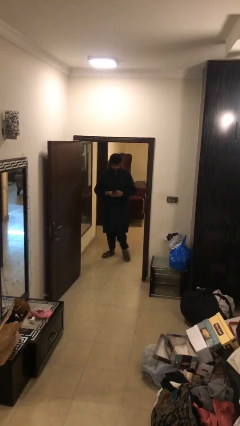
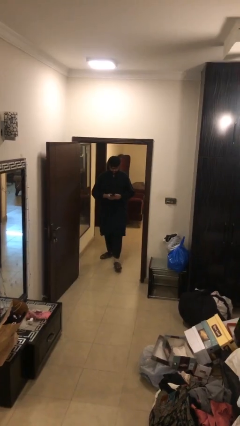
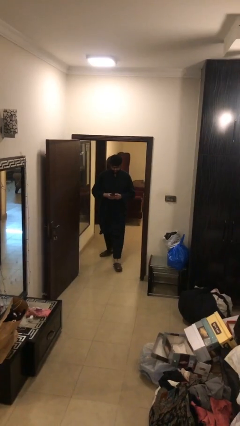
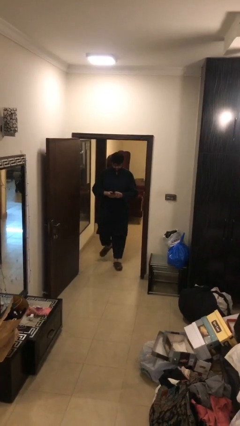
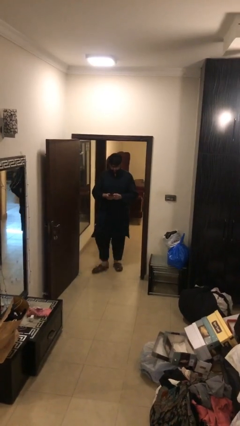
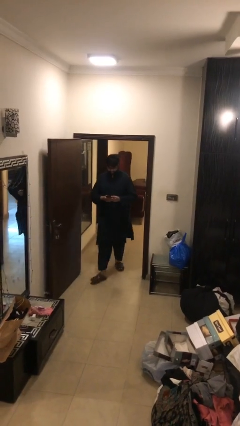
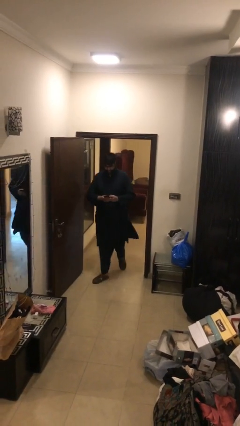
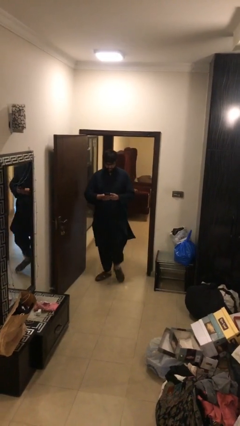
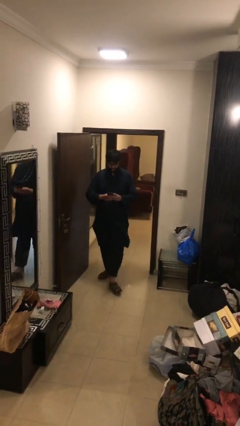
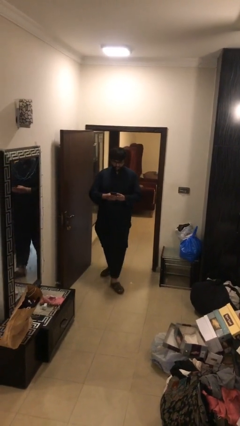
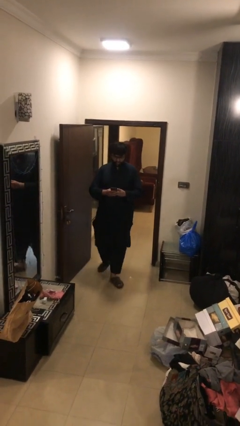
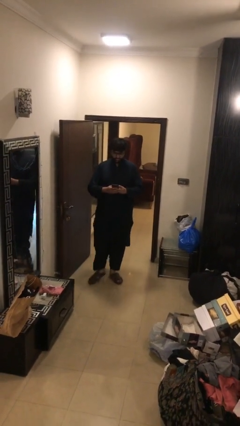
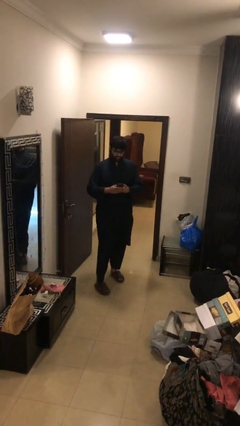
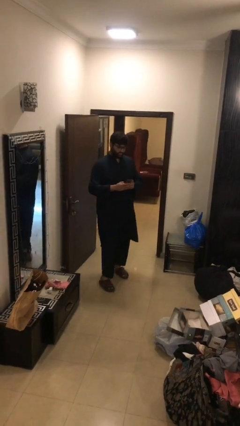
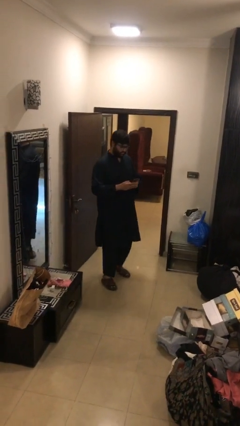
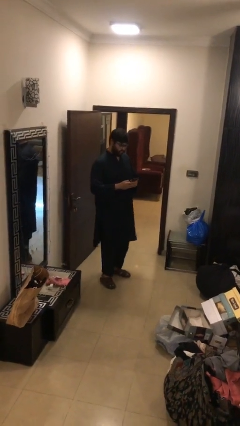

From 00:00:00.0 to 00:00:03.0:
person enters scene through structure

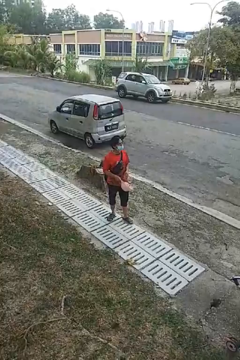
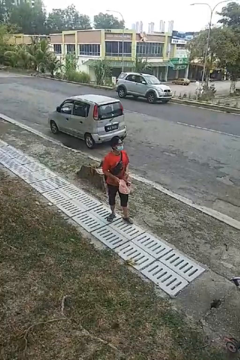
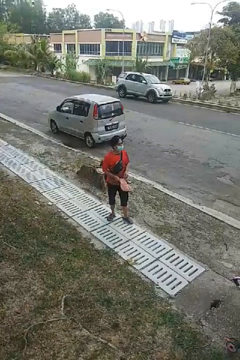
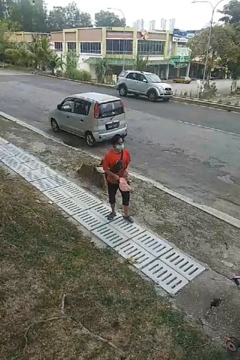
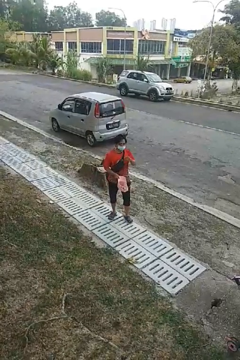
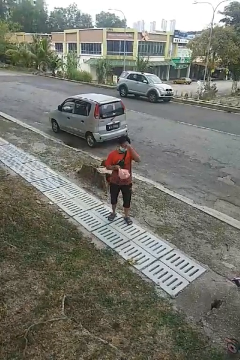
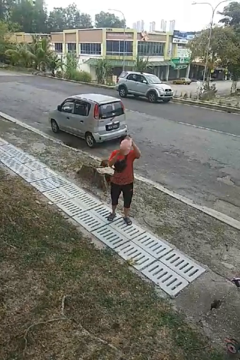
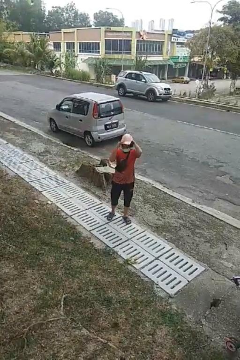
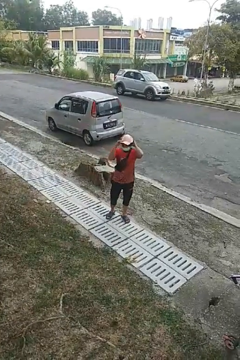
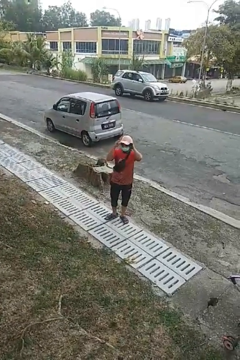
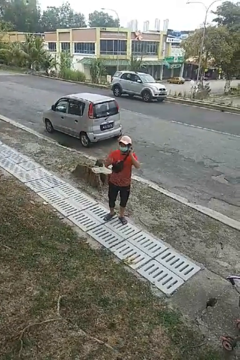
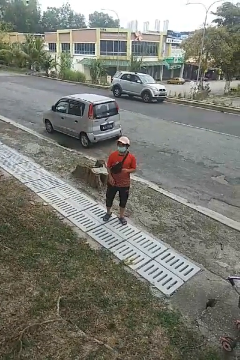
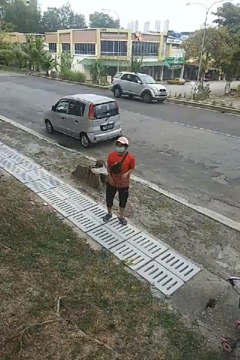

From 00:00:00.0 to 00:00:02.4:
person puts on hat

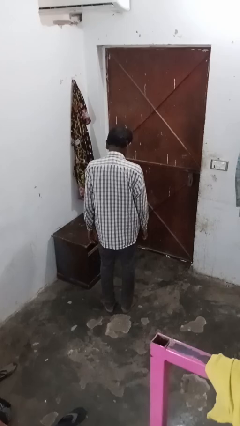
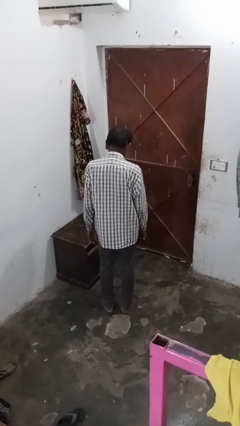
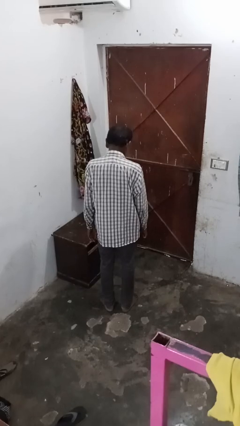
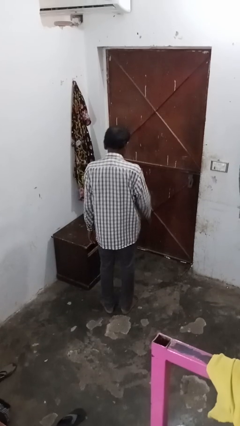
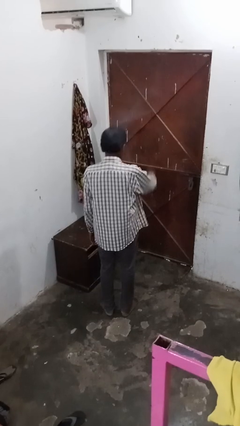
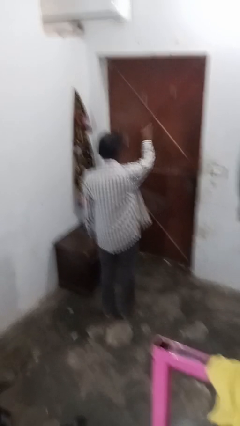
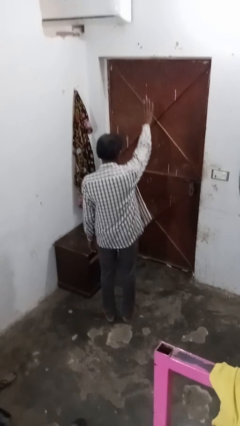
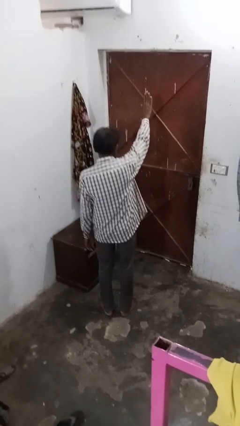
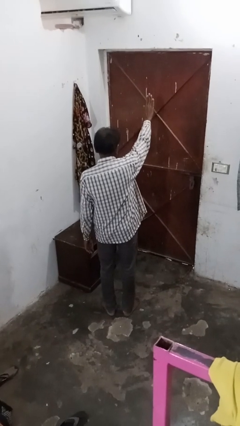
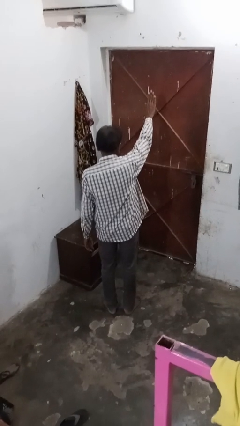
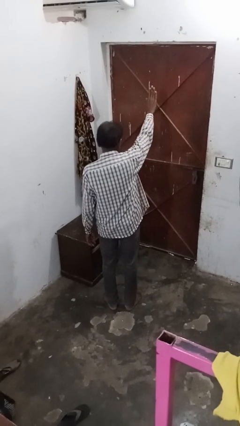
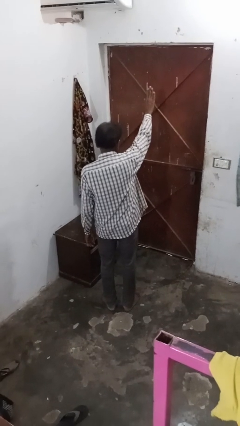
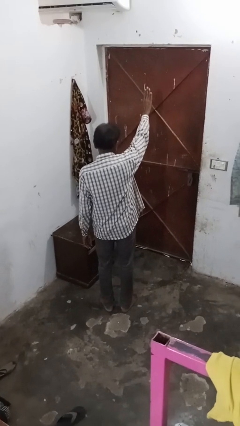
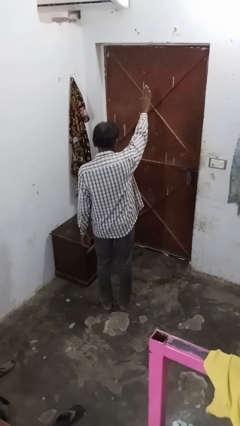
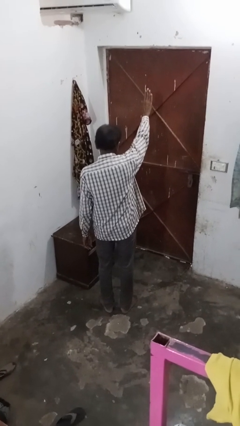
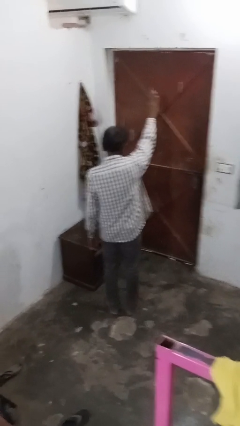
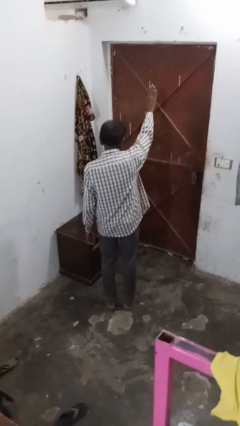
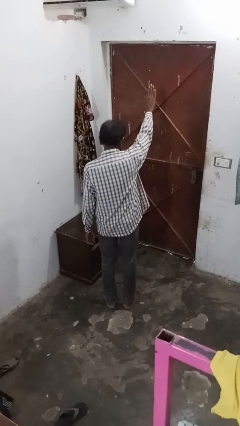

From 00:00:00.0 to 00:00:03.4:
person gestures stop

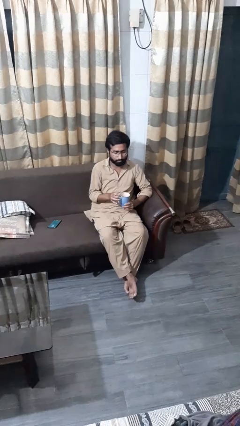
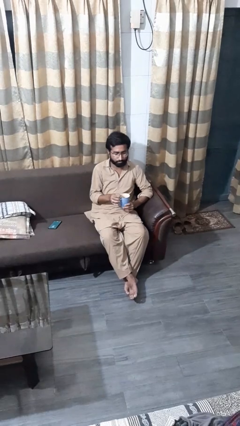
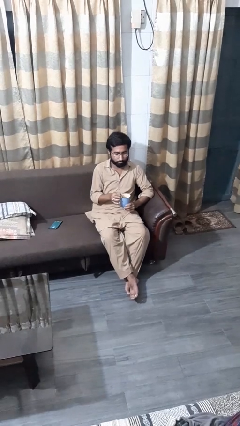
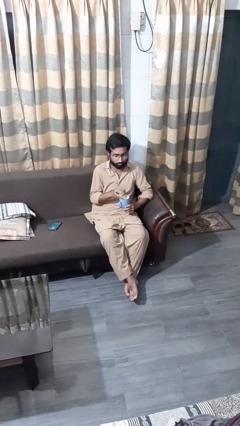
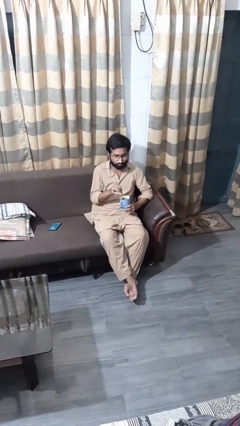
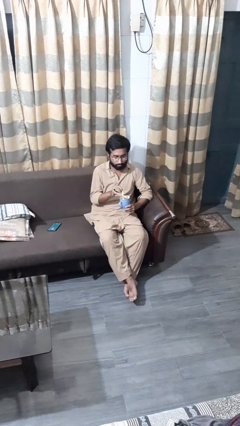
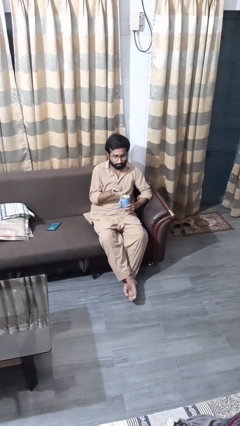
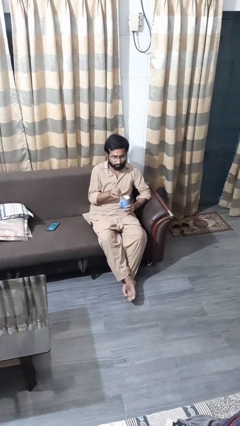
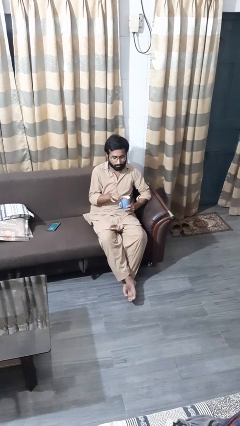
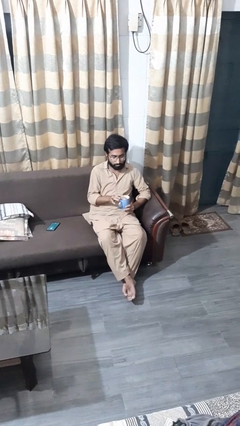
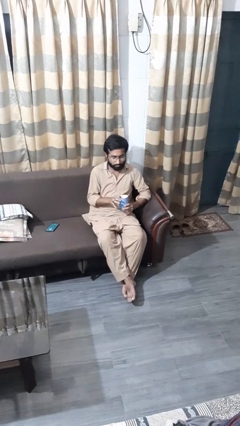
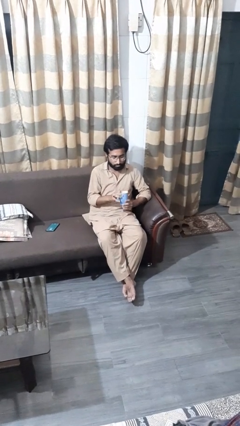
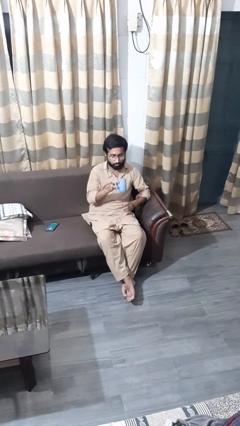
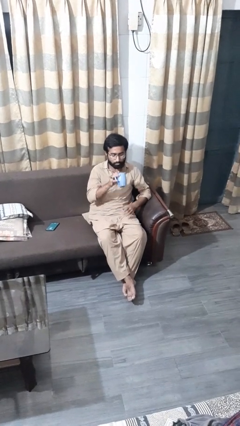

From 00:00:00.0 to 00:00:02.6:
person stirs mug

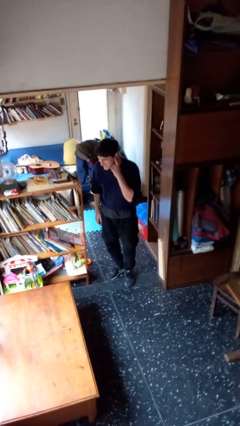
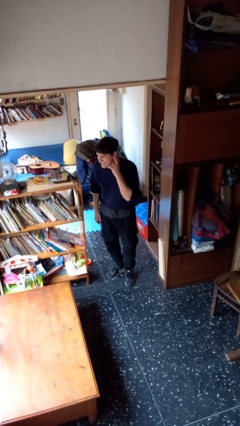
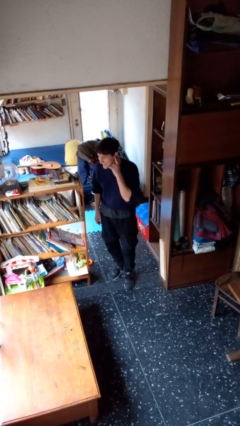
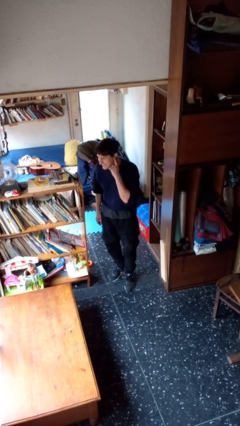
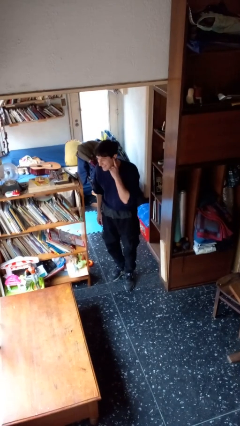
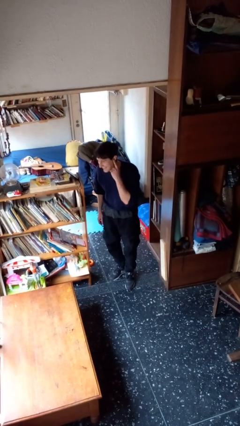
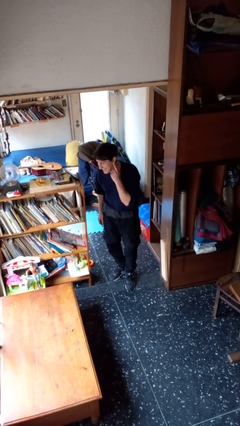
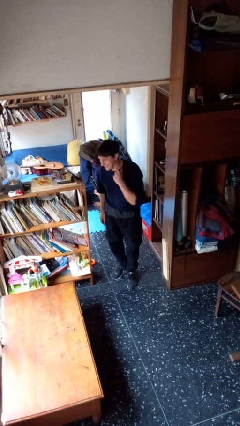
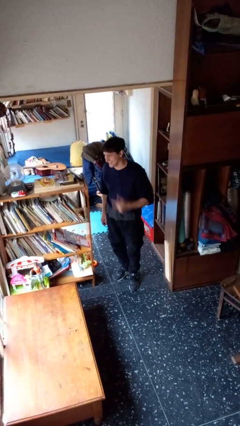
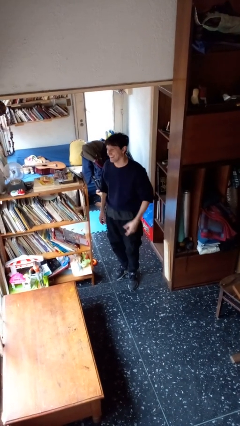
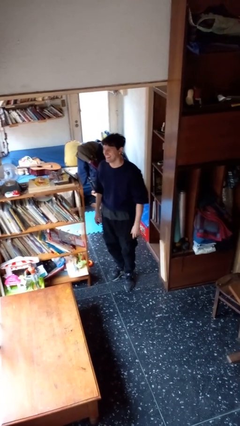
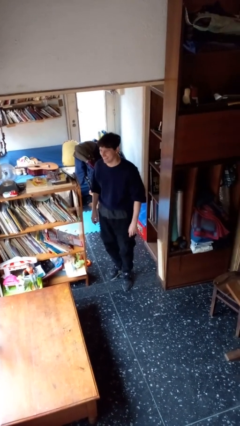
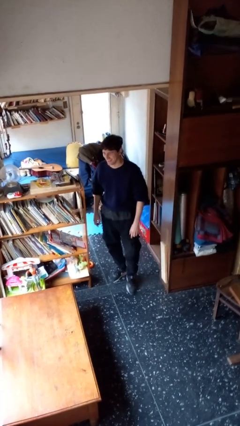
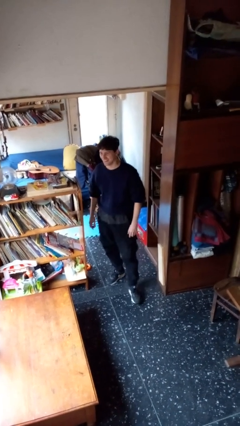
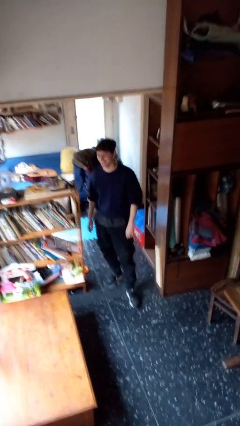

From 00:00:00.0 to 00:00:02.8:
person gestures listen closely

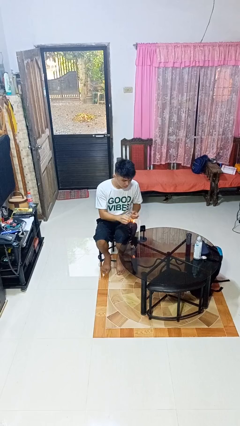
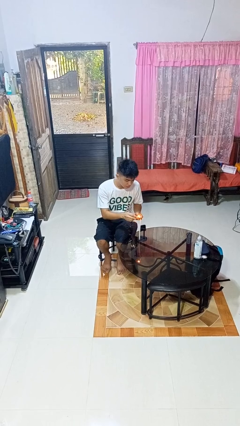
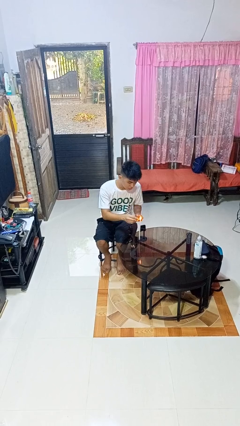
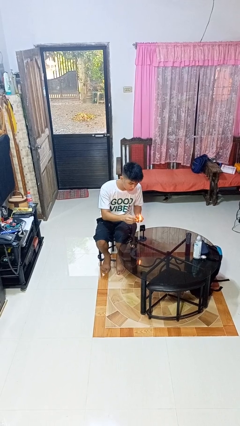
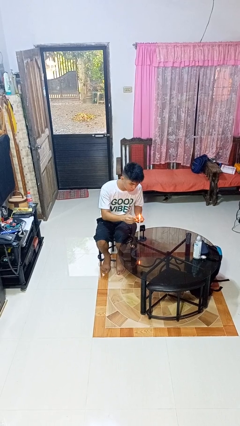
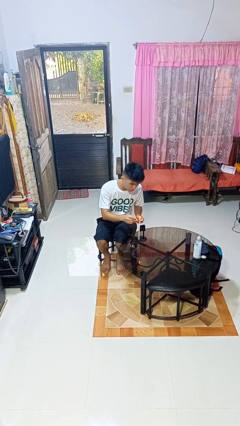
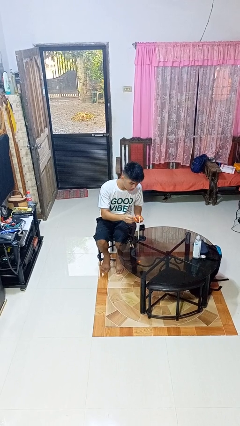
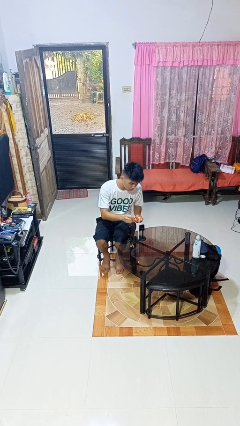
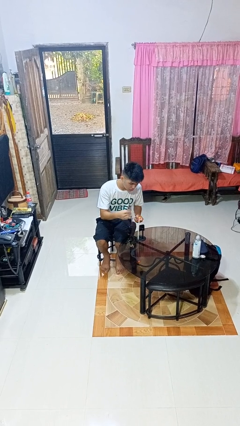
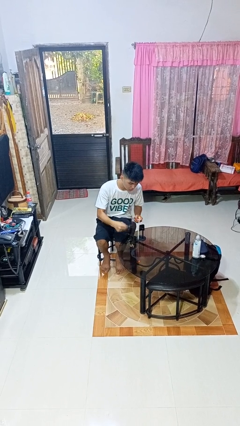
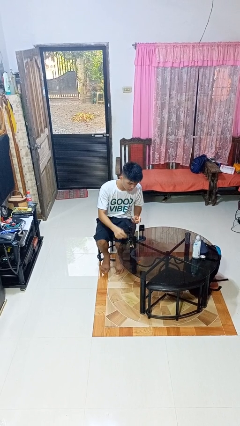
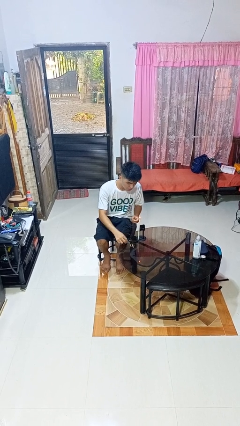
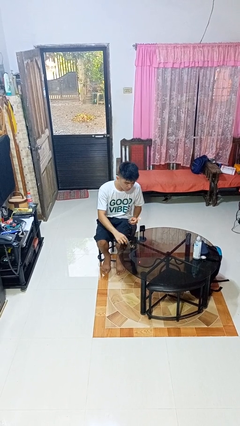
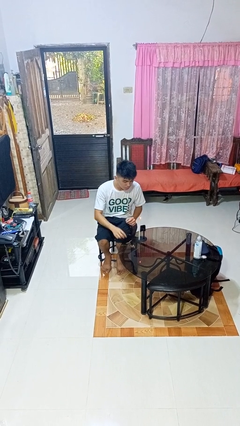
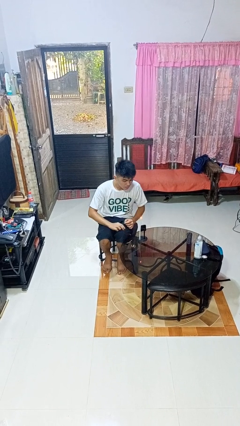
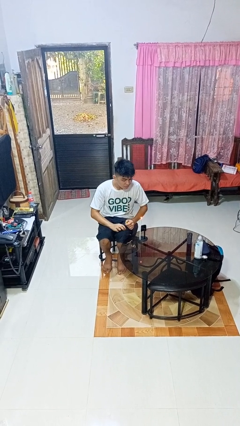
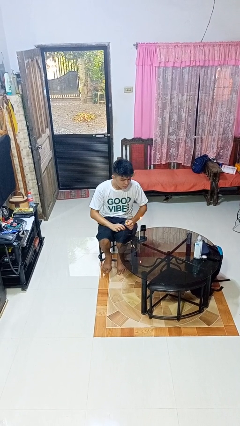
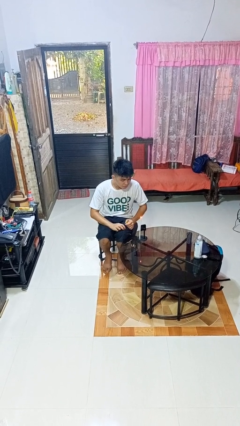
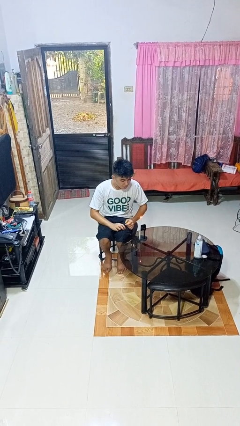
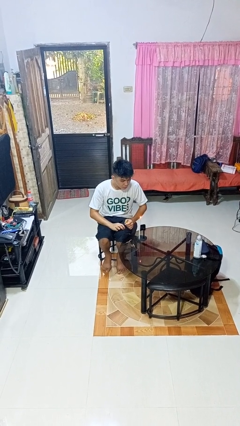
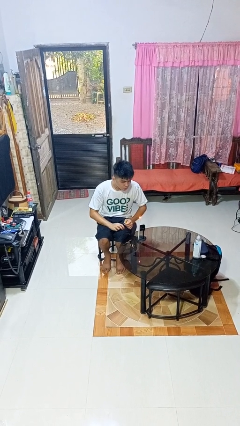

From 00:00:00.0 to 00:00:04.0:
person lights candle
